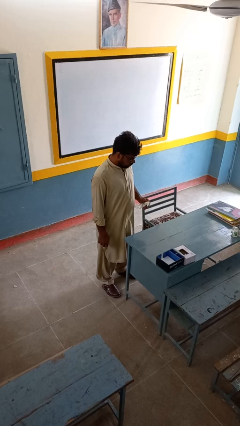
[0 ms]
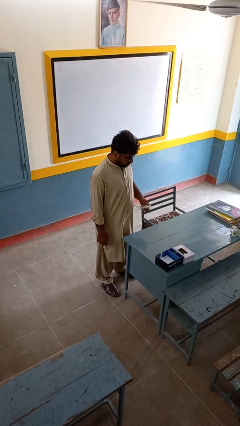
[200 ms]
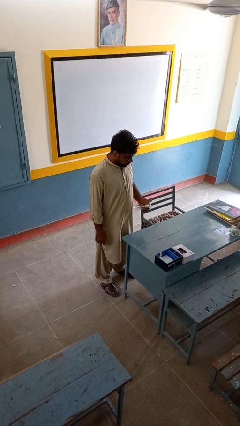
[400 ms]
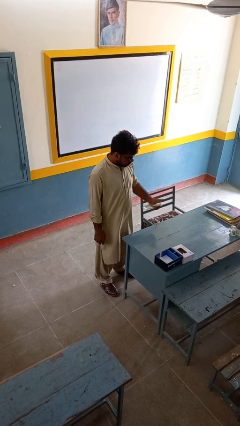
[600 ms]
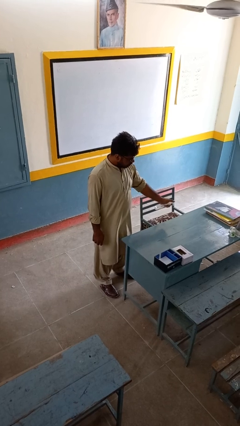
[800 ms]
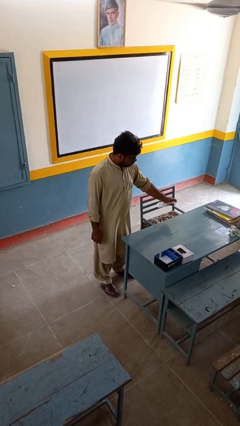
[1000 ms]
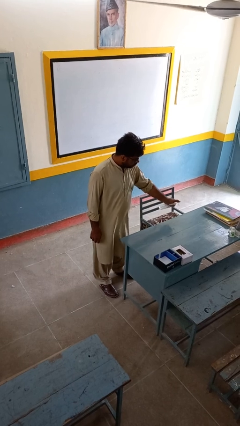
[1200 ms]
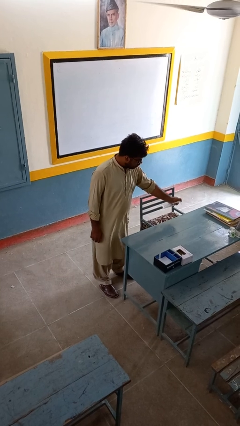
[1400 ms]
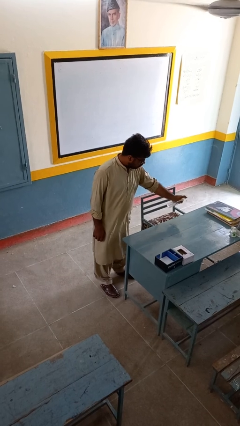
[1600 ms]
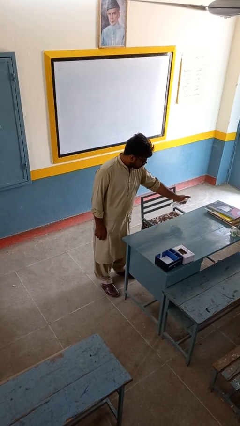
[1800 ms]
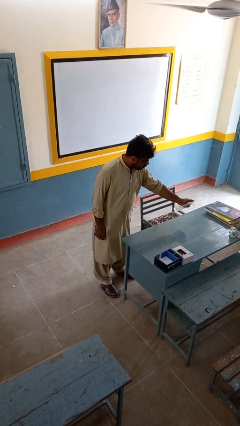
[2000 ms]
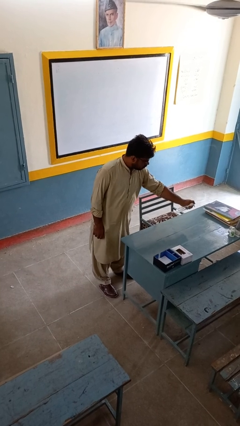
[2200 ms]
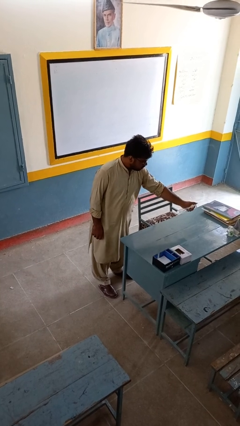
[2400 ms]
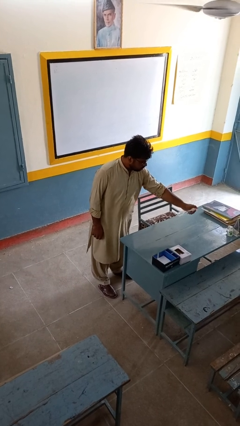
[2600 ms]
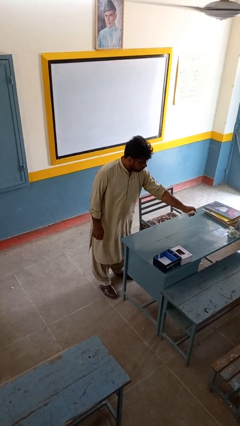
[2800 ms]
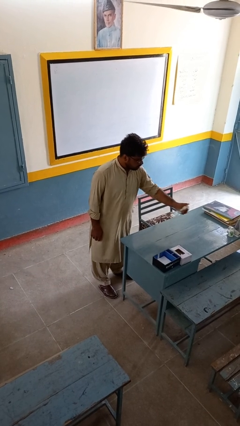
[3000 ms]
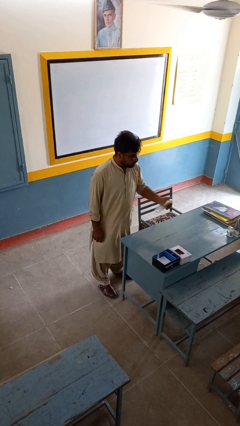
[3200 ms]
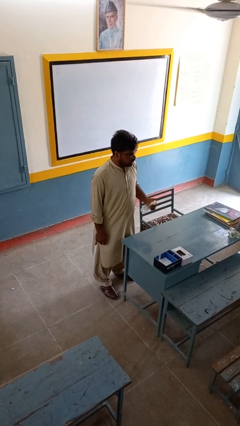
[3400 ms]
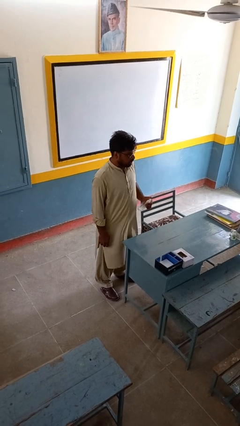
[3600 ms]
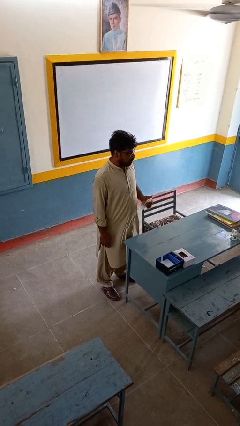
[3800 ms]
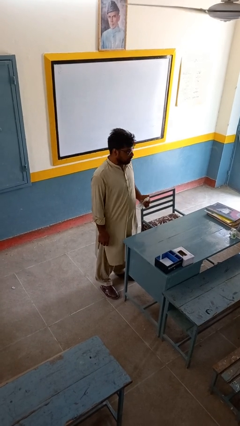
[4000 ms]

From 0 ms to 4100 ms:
person sprays from bottle

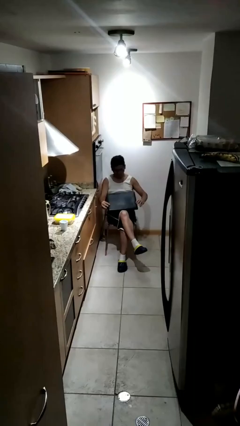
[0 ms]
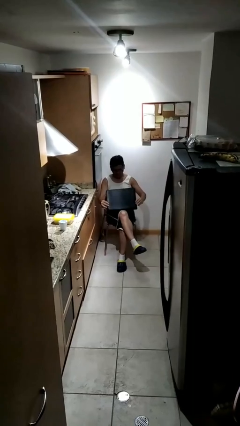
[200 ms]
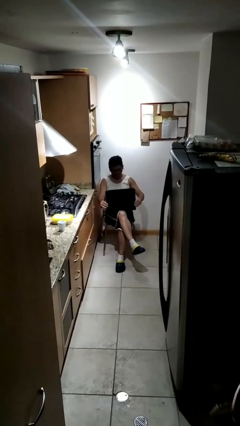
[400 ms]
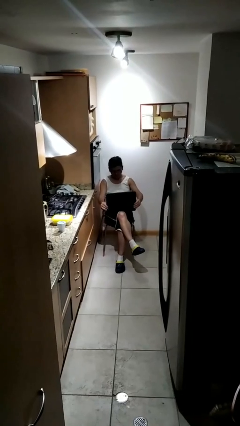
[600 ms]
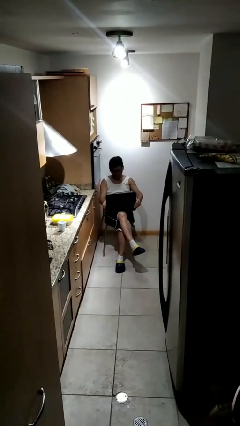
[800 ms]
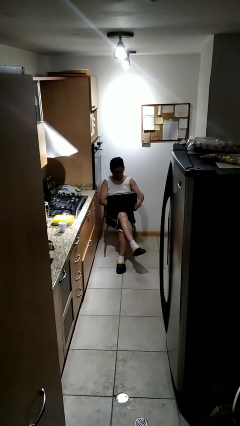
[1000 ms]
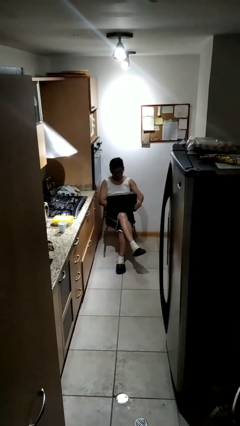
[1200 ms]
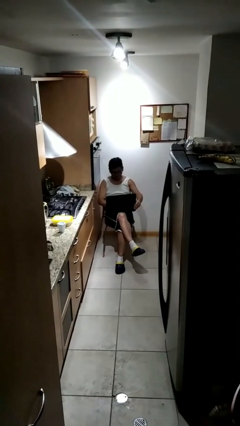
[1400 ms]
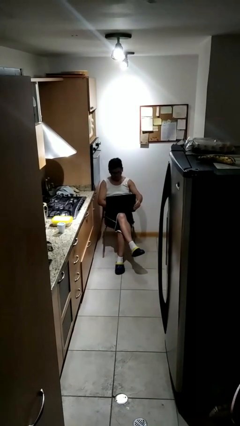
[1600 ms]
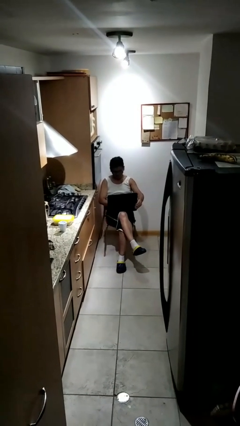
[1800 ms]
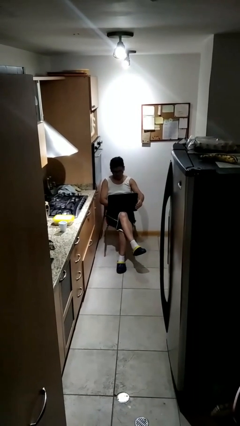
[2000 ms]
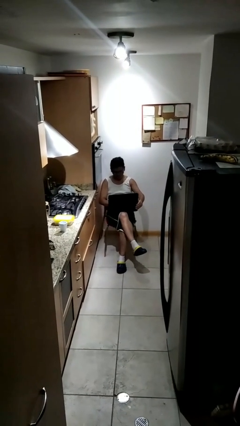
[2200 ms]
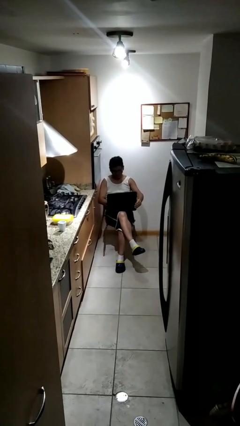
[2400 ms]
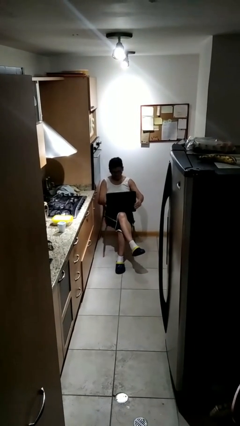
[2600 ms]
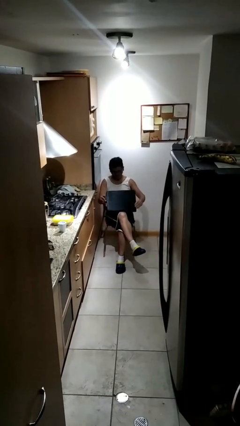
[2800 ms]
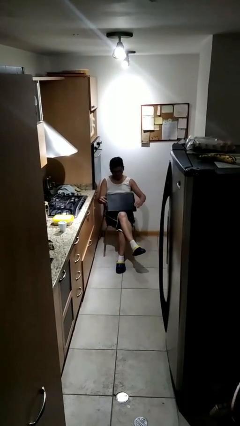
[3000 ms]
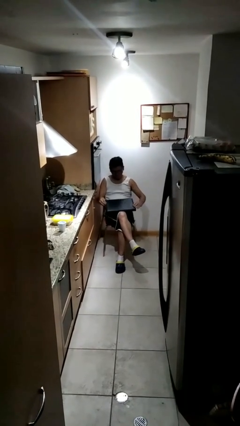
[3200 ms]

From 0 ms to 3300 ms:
person interacts with laptop

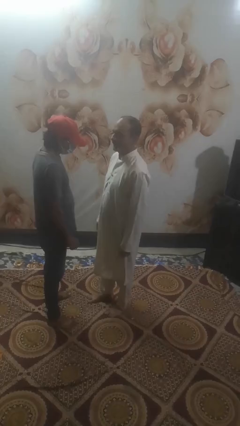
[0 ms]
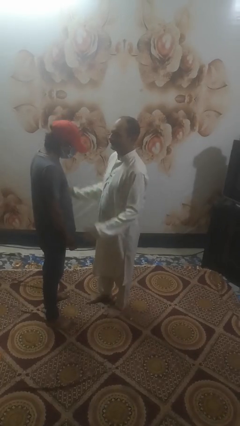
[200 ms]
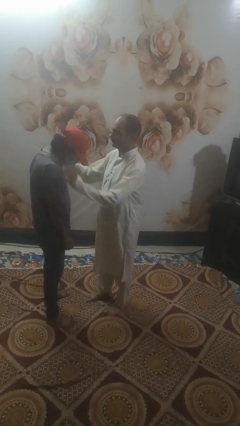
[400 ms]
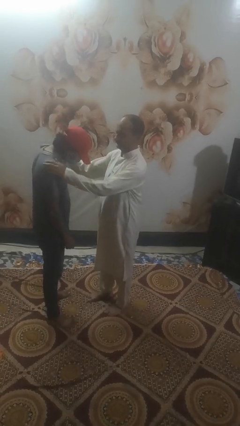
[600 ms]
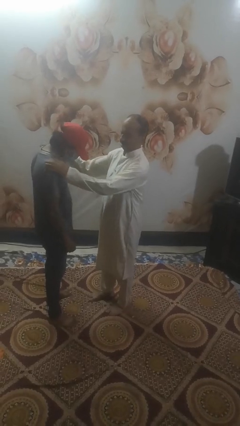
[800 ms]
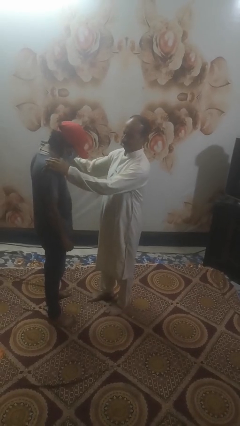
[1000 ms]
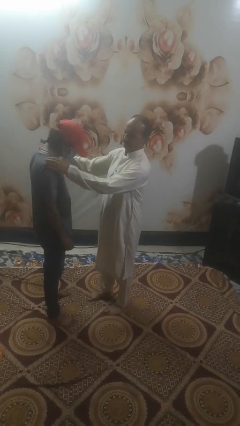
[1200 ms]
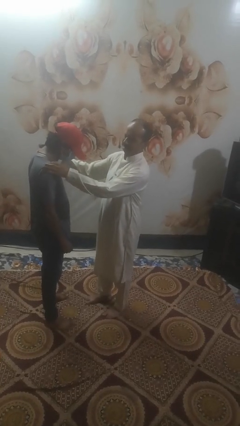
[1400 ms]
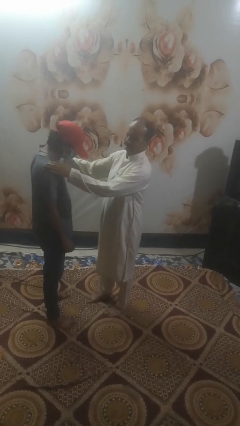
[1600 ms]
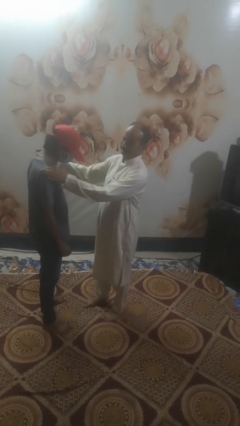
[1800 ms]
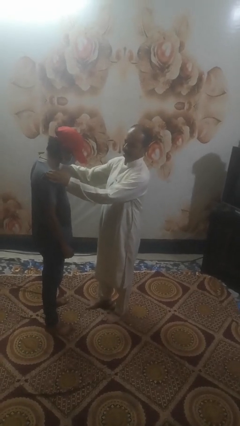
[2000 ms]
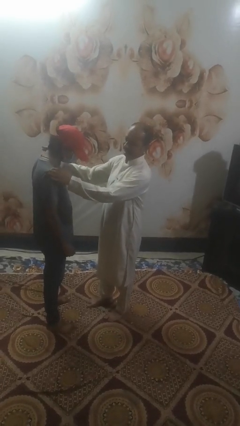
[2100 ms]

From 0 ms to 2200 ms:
person pounds shoulders of person

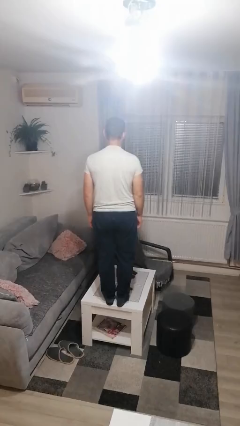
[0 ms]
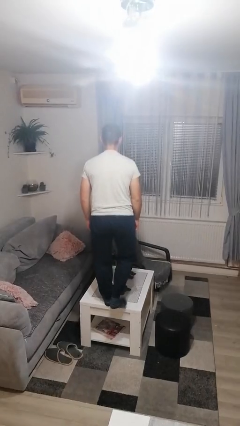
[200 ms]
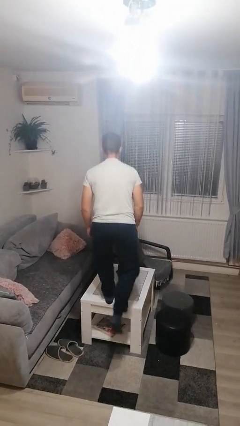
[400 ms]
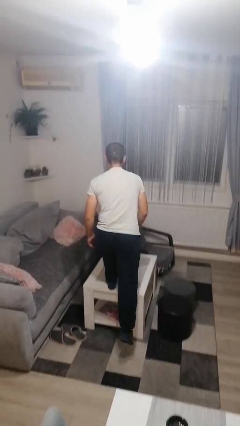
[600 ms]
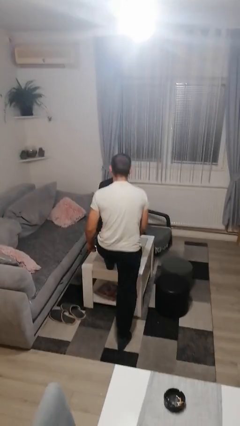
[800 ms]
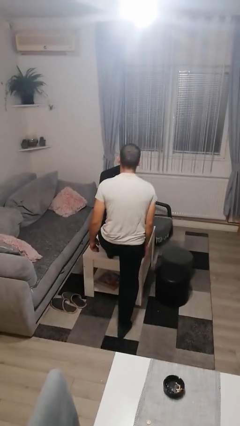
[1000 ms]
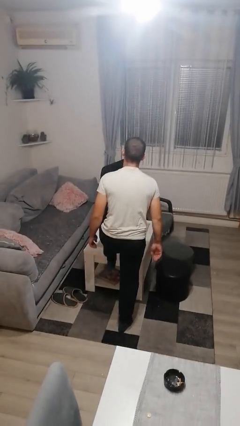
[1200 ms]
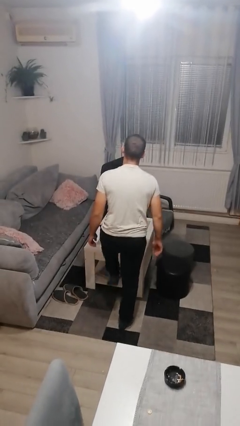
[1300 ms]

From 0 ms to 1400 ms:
person climbs off table

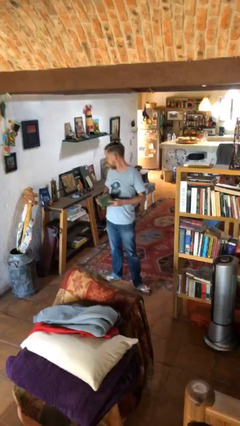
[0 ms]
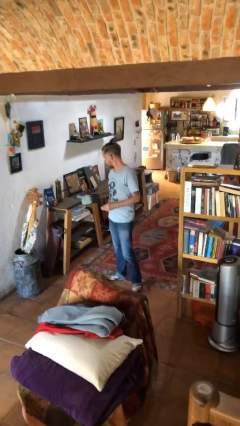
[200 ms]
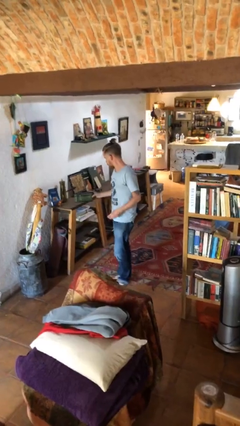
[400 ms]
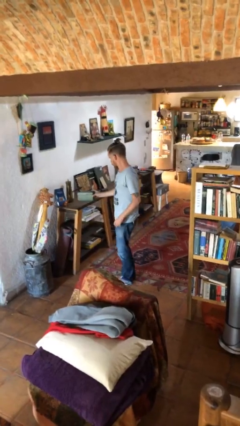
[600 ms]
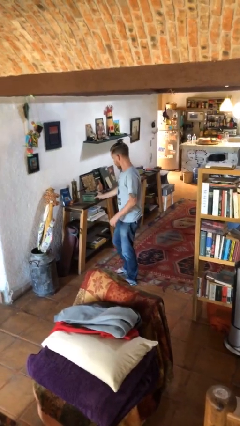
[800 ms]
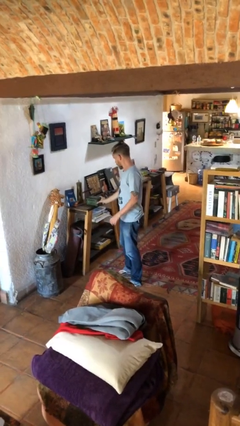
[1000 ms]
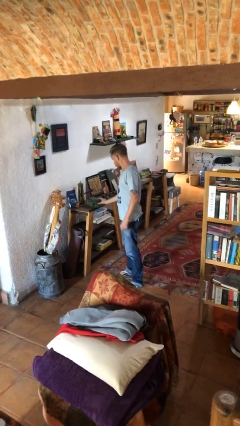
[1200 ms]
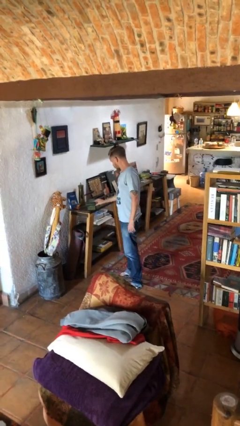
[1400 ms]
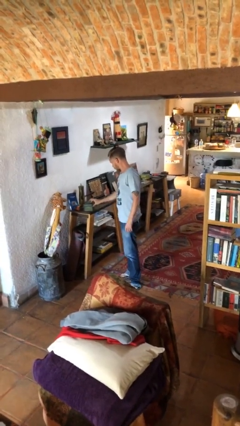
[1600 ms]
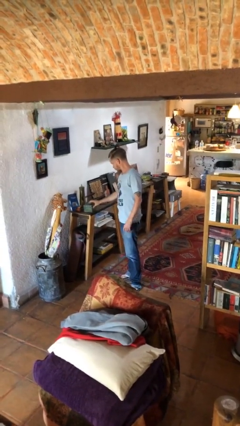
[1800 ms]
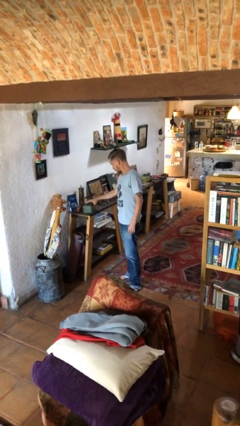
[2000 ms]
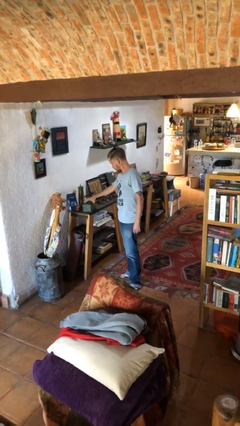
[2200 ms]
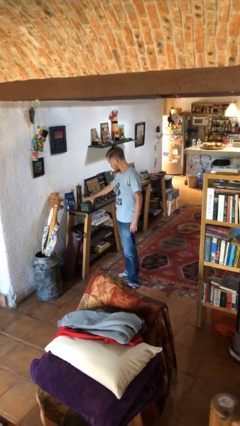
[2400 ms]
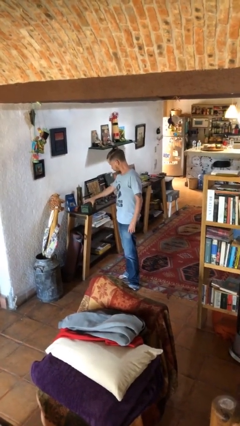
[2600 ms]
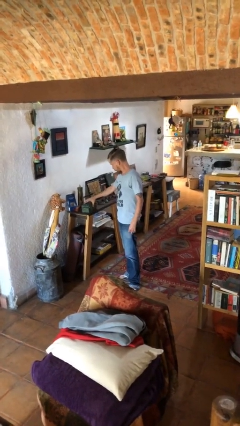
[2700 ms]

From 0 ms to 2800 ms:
person puts down object on table

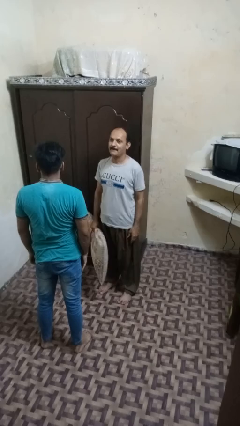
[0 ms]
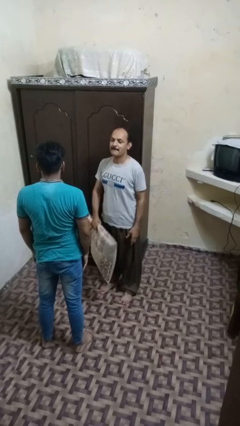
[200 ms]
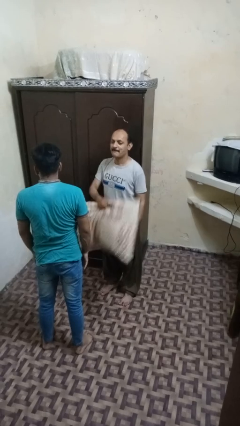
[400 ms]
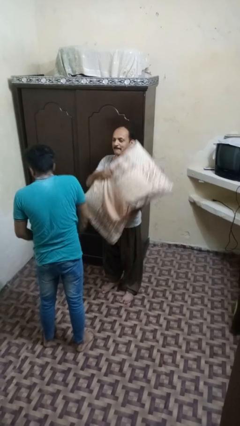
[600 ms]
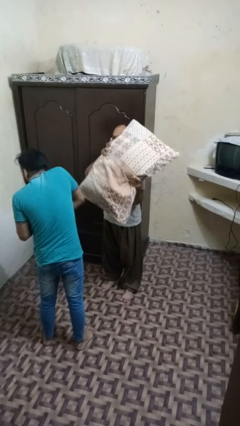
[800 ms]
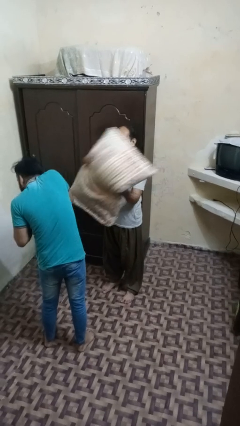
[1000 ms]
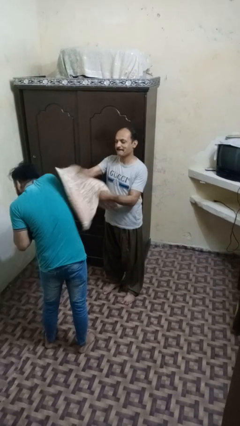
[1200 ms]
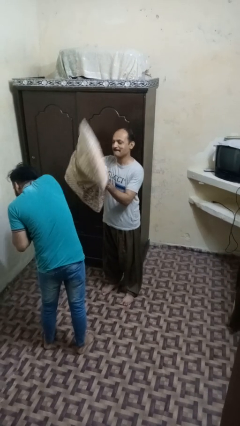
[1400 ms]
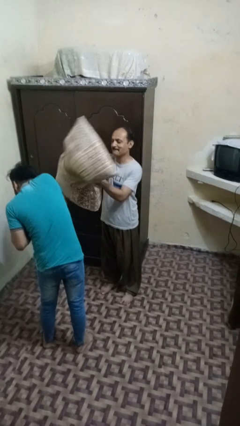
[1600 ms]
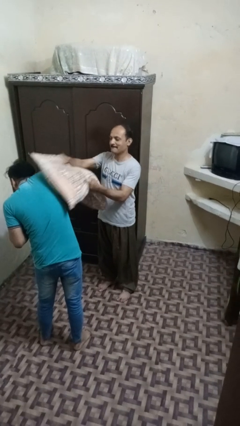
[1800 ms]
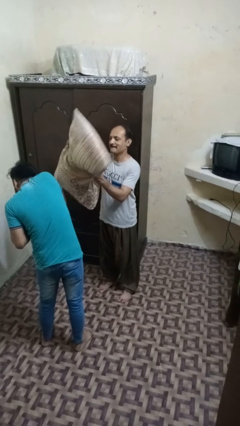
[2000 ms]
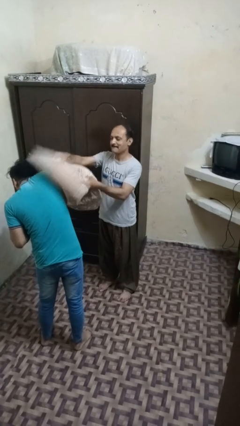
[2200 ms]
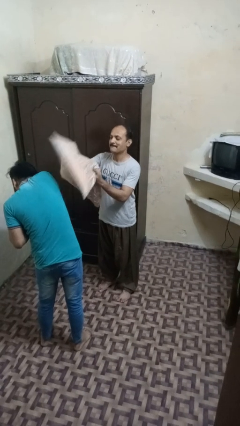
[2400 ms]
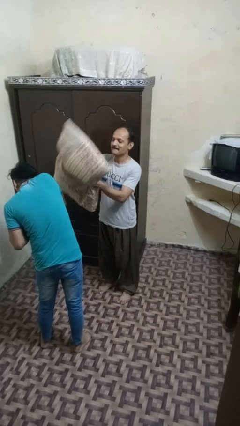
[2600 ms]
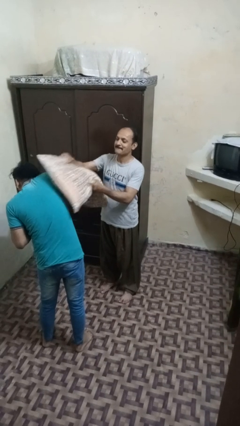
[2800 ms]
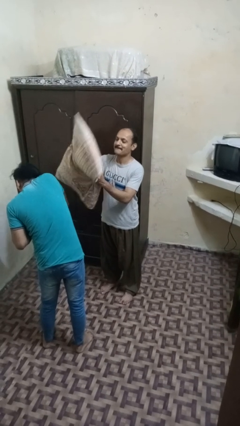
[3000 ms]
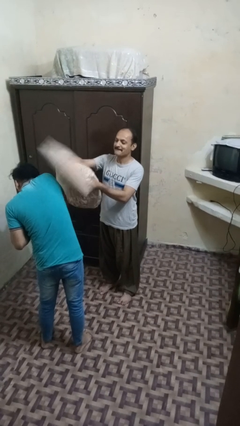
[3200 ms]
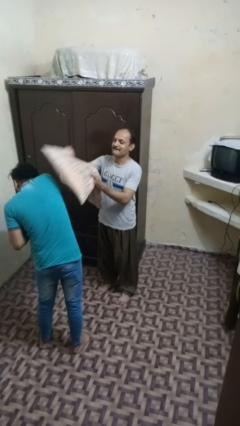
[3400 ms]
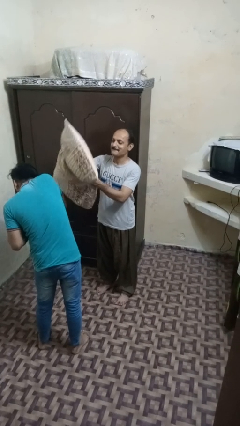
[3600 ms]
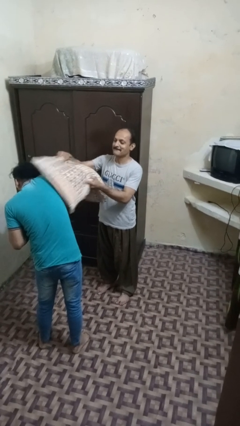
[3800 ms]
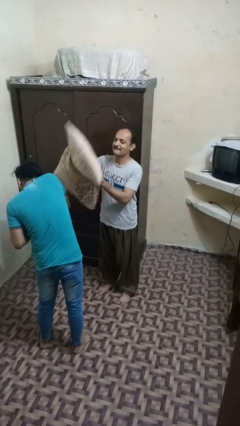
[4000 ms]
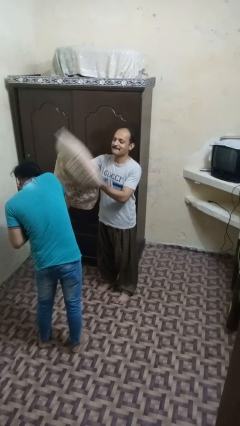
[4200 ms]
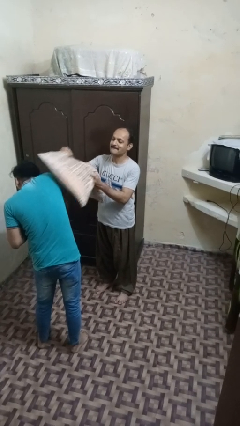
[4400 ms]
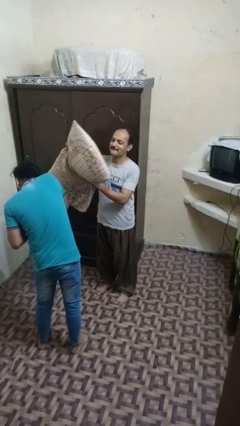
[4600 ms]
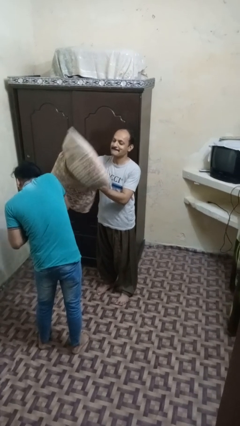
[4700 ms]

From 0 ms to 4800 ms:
person hits person with pillow
